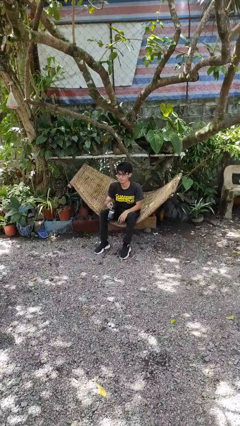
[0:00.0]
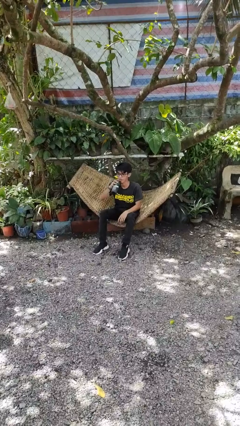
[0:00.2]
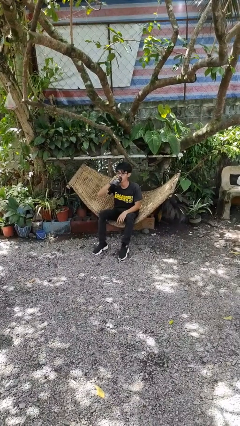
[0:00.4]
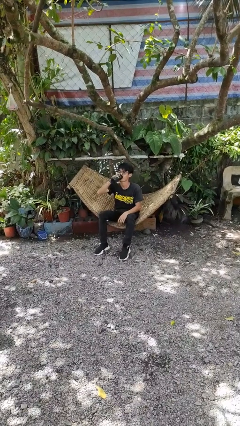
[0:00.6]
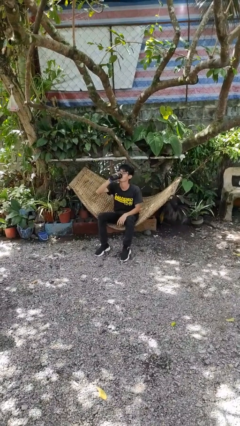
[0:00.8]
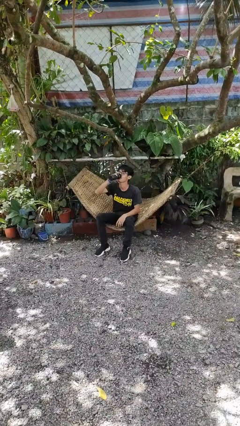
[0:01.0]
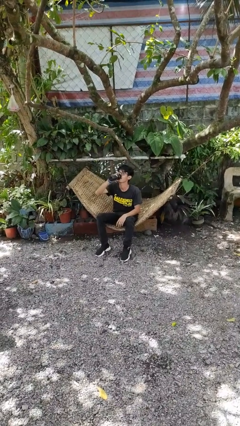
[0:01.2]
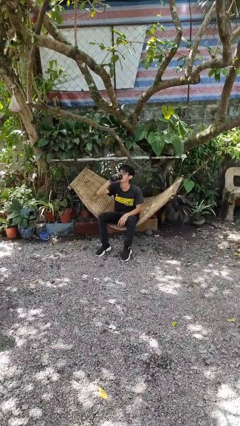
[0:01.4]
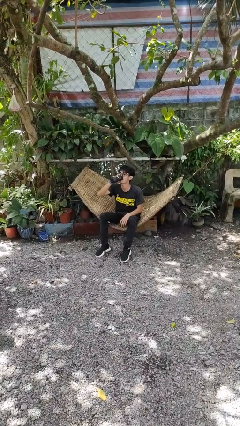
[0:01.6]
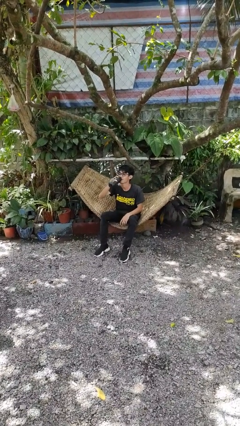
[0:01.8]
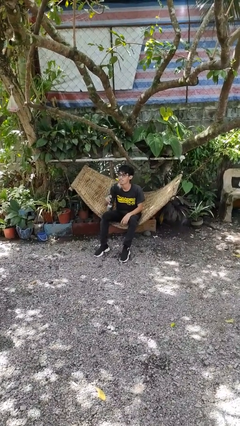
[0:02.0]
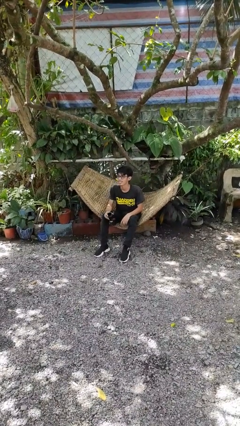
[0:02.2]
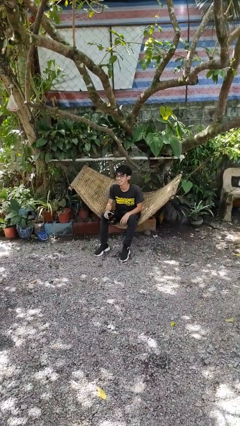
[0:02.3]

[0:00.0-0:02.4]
person drinks from bottle

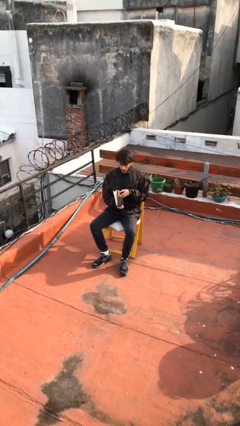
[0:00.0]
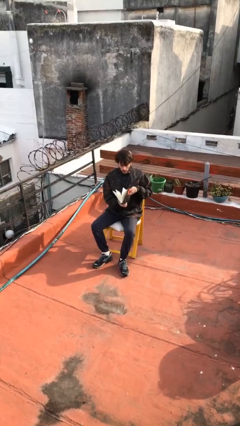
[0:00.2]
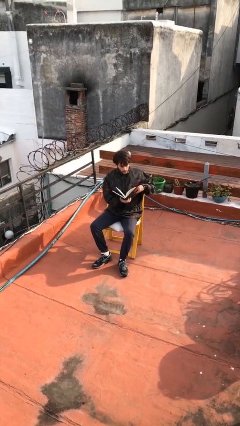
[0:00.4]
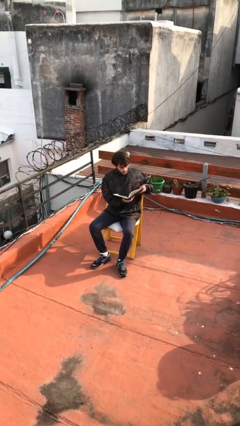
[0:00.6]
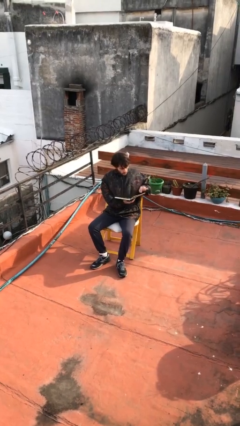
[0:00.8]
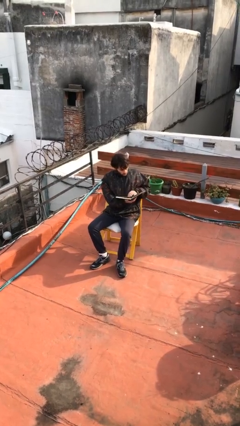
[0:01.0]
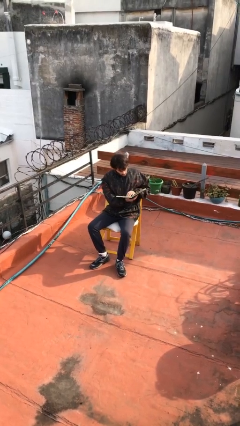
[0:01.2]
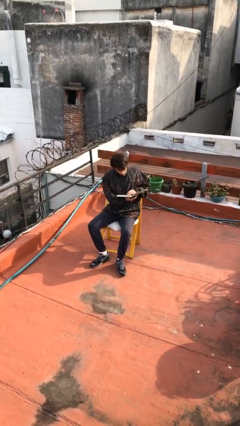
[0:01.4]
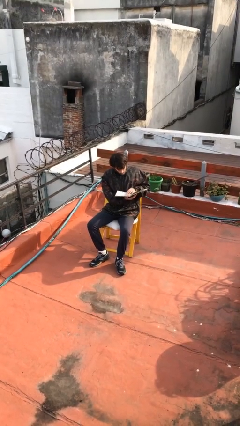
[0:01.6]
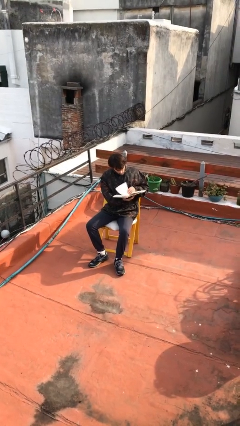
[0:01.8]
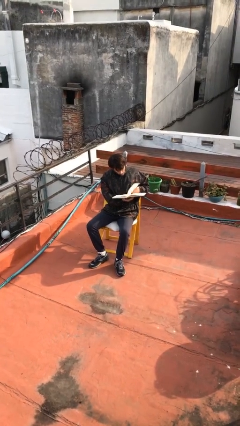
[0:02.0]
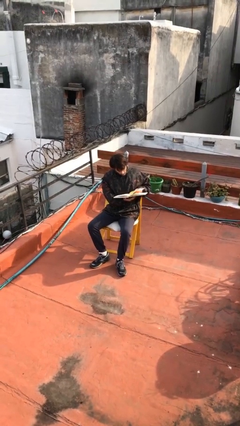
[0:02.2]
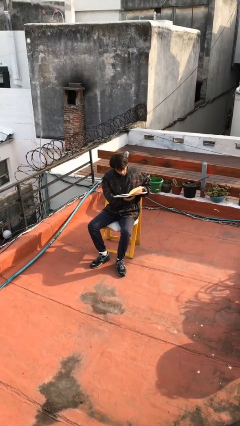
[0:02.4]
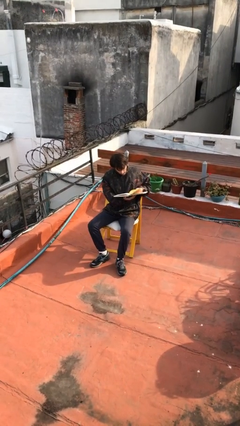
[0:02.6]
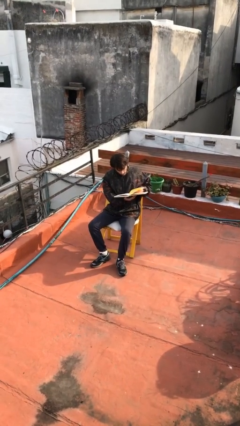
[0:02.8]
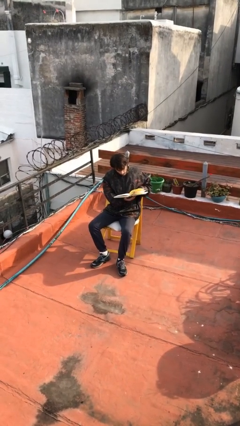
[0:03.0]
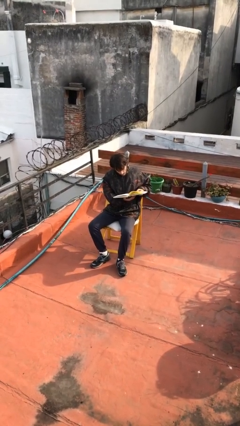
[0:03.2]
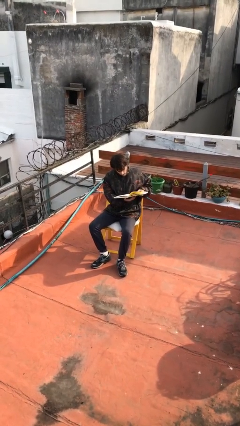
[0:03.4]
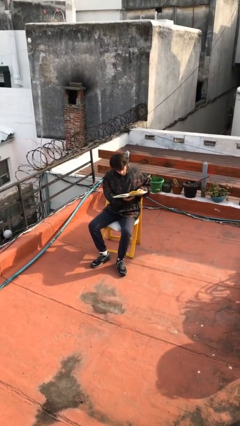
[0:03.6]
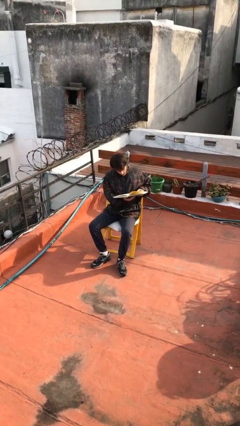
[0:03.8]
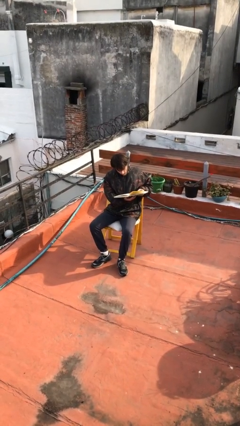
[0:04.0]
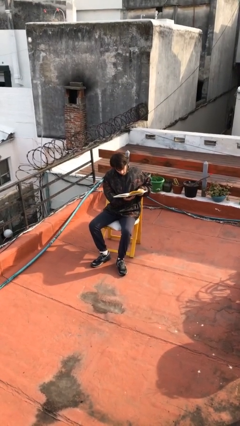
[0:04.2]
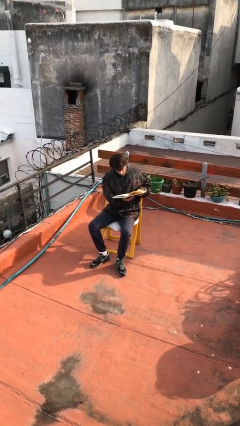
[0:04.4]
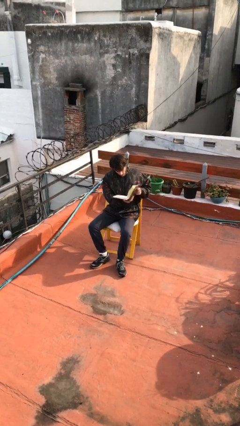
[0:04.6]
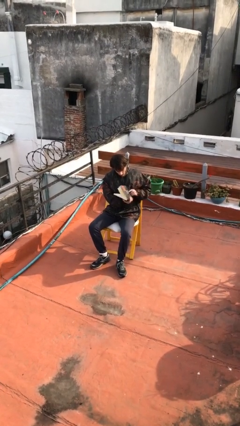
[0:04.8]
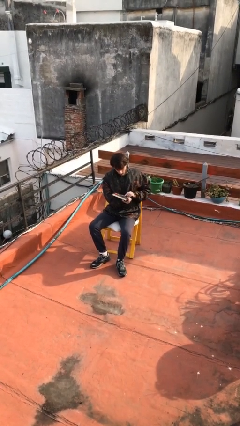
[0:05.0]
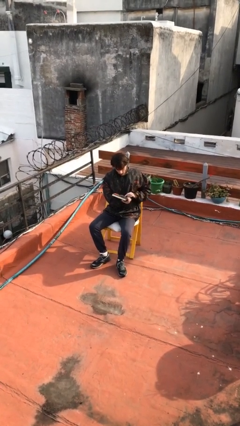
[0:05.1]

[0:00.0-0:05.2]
person reads book

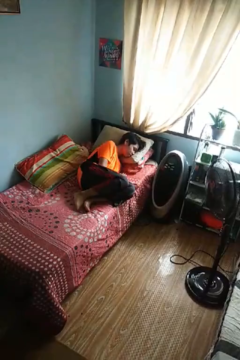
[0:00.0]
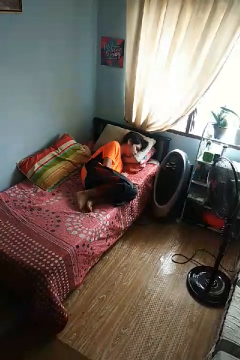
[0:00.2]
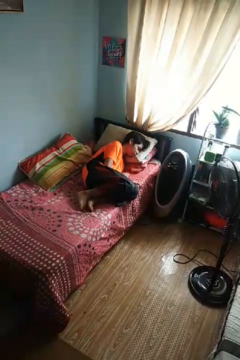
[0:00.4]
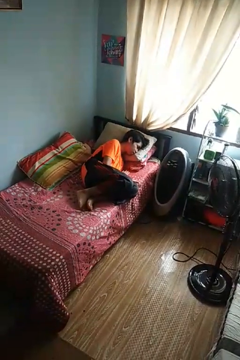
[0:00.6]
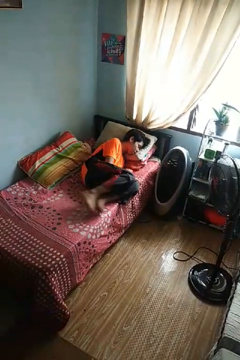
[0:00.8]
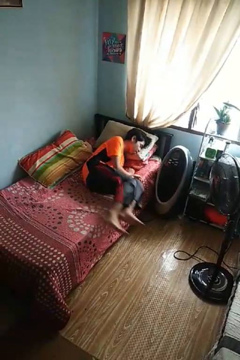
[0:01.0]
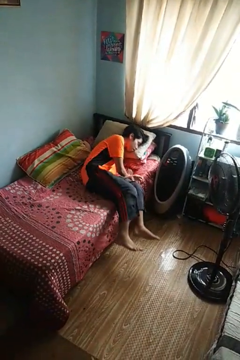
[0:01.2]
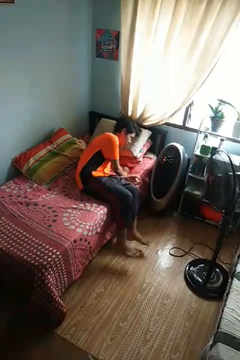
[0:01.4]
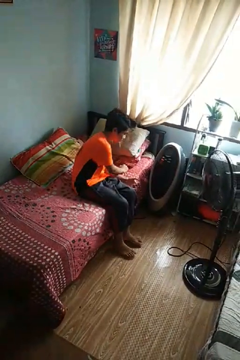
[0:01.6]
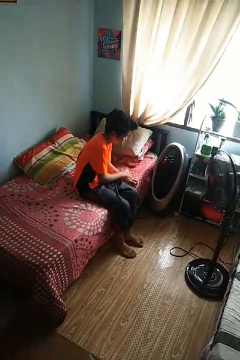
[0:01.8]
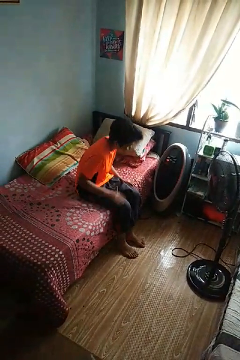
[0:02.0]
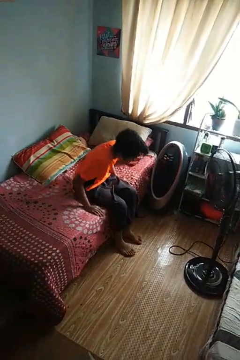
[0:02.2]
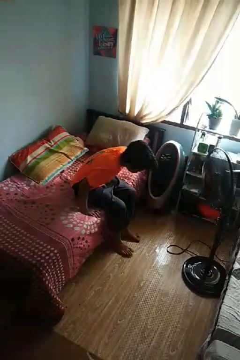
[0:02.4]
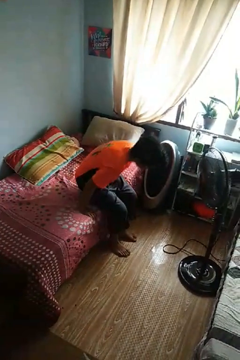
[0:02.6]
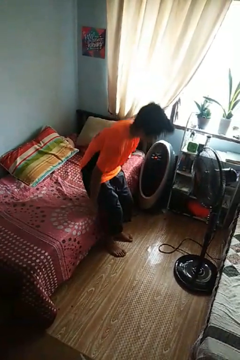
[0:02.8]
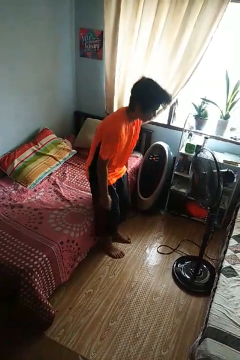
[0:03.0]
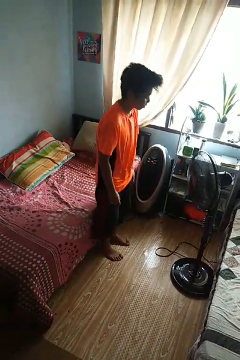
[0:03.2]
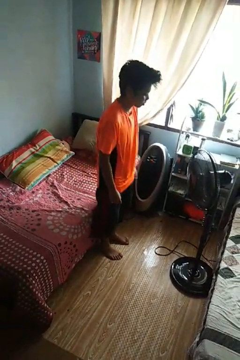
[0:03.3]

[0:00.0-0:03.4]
person stands up

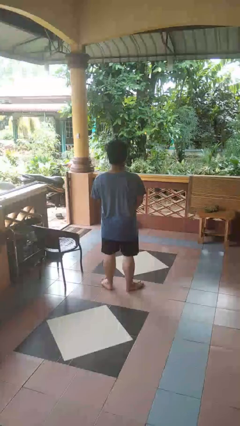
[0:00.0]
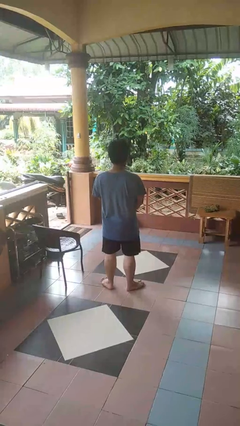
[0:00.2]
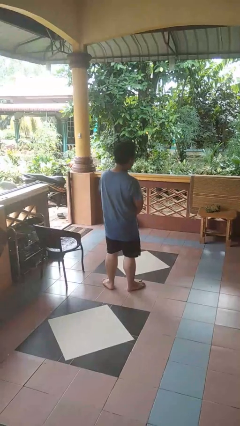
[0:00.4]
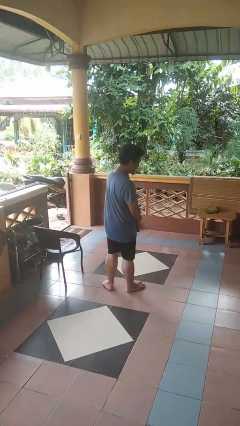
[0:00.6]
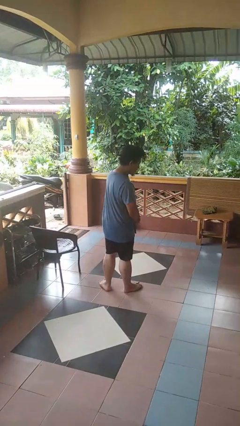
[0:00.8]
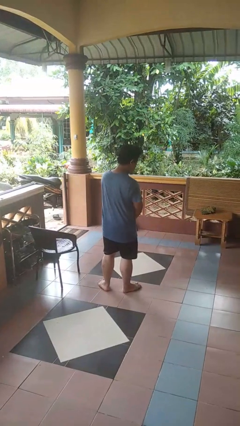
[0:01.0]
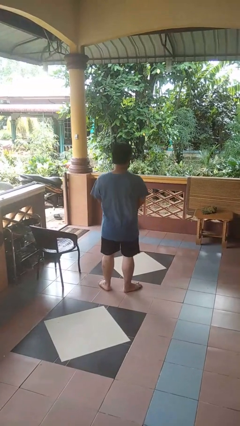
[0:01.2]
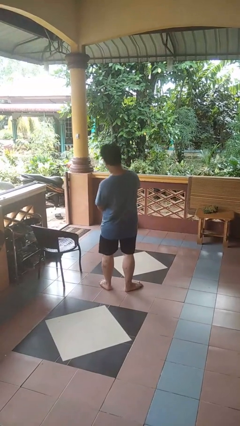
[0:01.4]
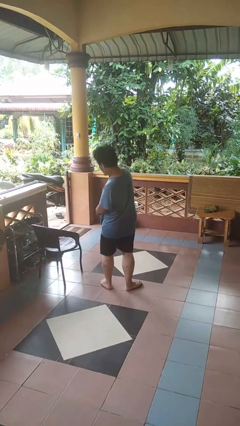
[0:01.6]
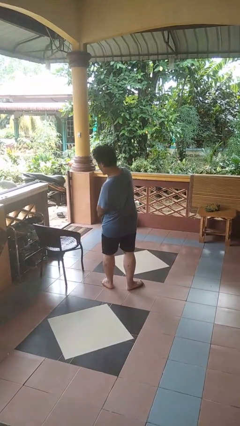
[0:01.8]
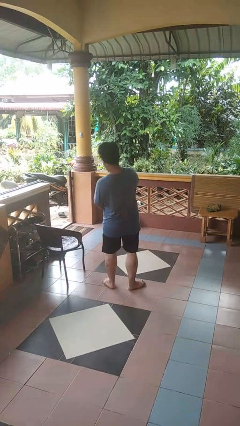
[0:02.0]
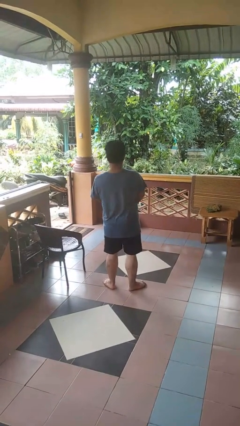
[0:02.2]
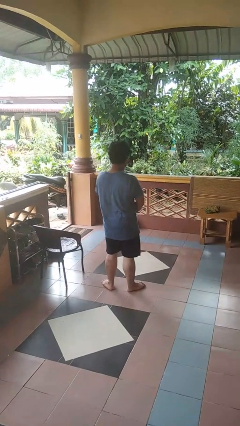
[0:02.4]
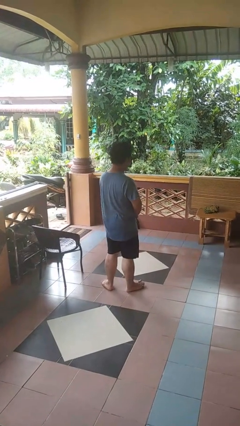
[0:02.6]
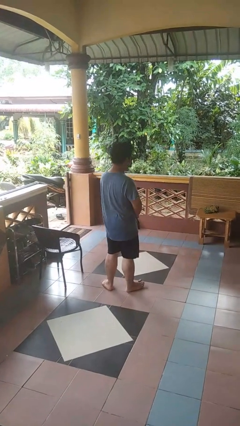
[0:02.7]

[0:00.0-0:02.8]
person twirls

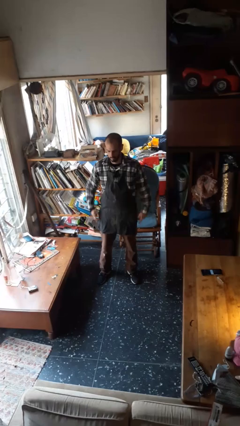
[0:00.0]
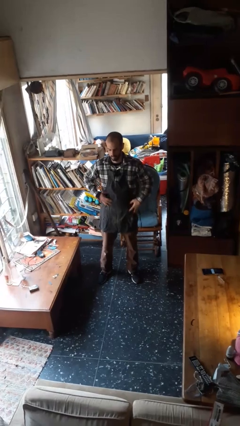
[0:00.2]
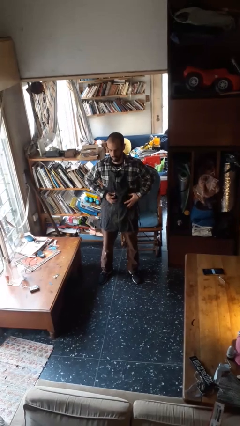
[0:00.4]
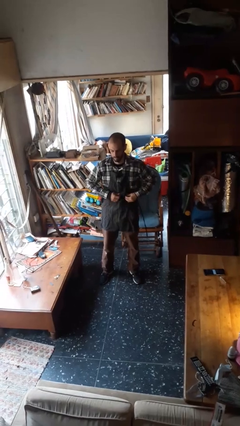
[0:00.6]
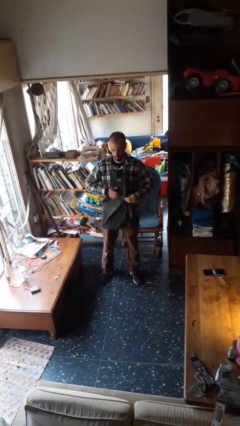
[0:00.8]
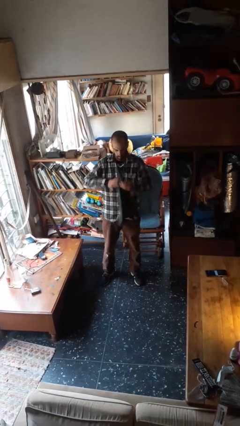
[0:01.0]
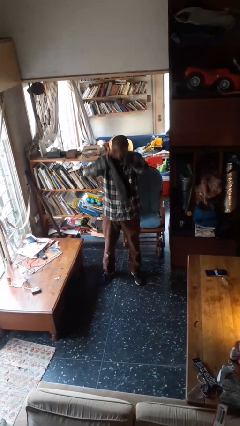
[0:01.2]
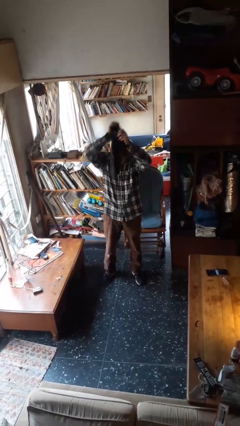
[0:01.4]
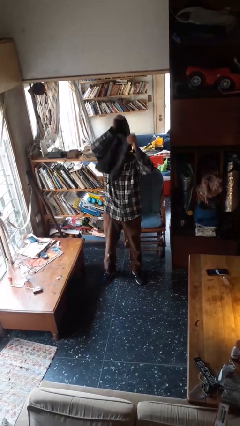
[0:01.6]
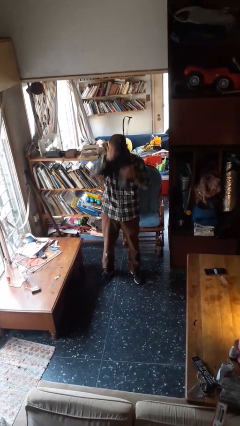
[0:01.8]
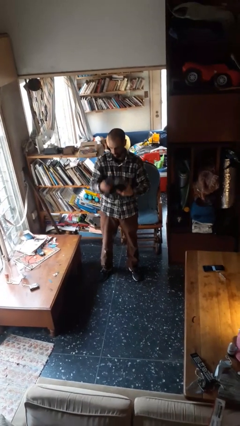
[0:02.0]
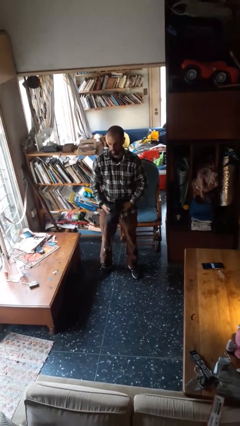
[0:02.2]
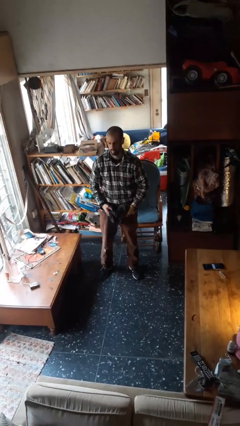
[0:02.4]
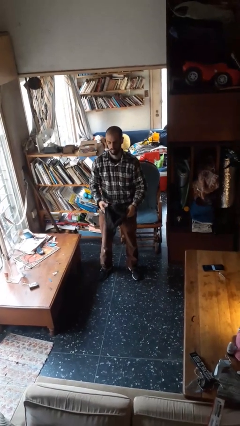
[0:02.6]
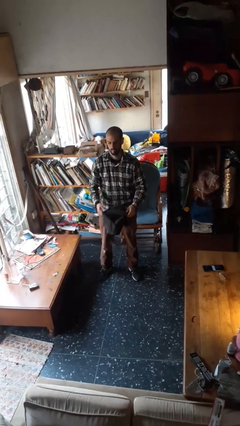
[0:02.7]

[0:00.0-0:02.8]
person takes off apron

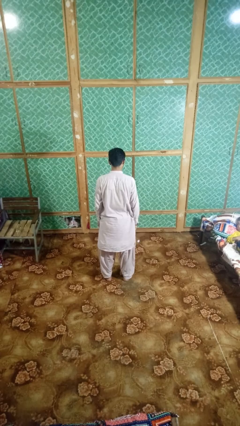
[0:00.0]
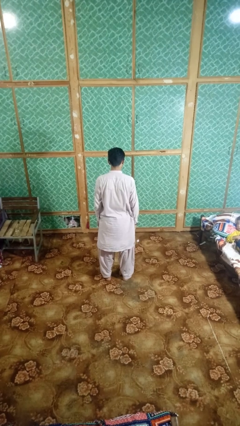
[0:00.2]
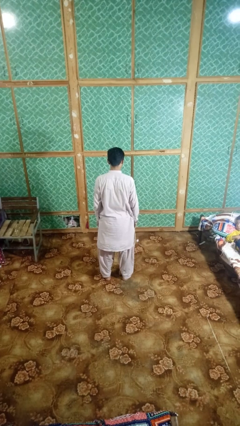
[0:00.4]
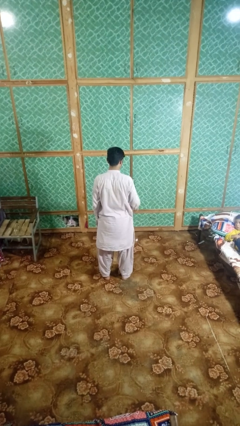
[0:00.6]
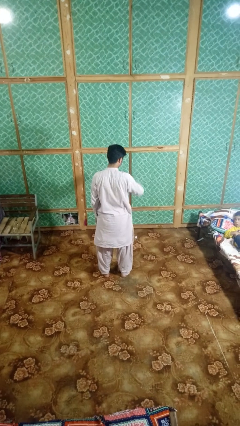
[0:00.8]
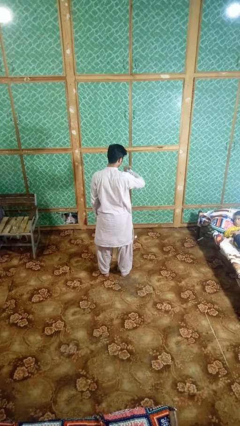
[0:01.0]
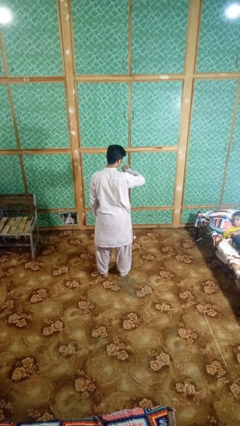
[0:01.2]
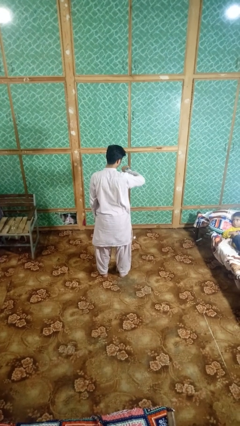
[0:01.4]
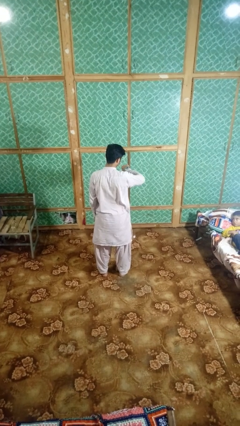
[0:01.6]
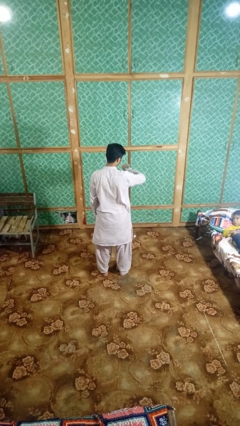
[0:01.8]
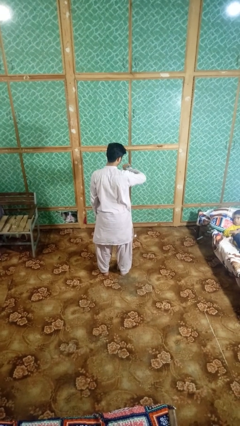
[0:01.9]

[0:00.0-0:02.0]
person looks at wristwatch
